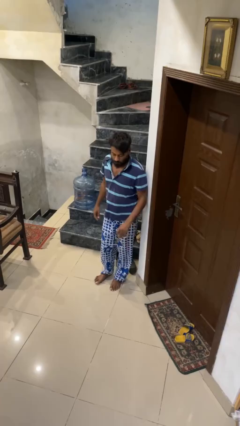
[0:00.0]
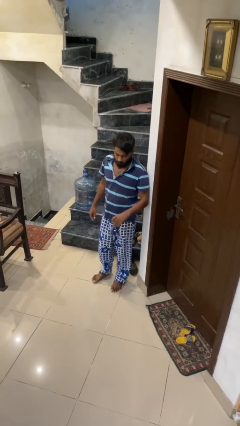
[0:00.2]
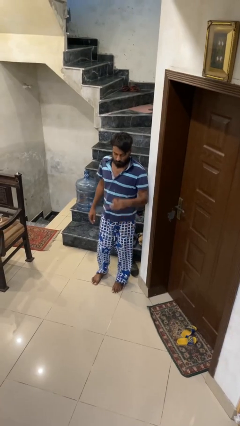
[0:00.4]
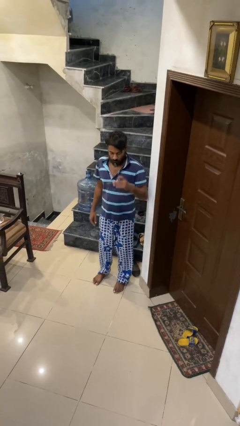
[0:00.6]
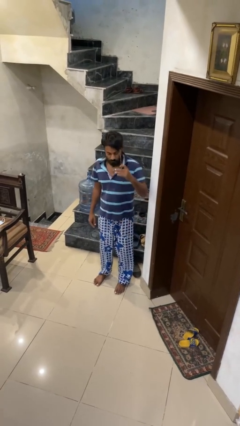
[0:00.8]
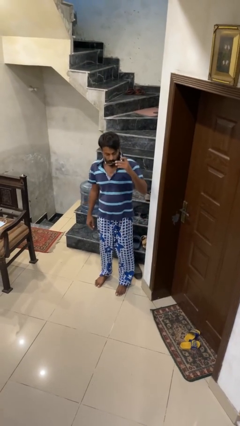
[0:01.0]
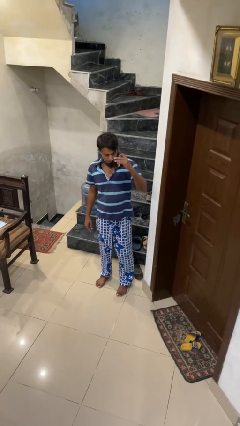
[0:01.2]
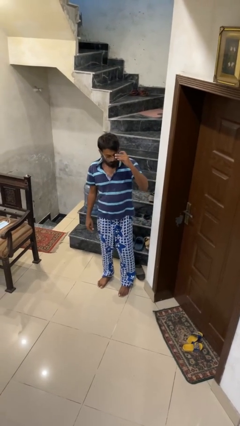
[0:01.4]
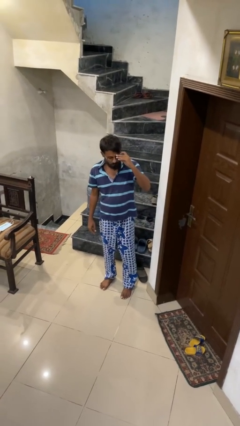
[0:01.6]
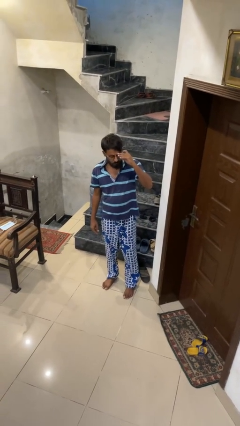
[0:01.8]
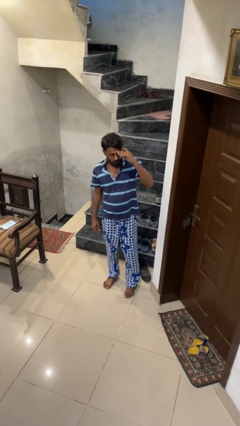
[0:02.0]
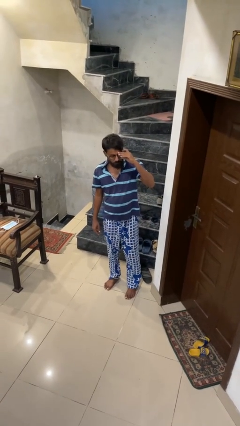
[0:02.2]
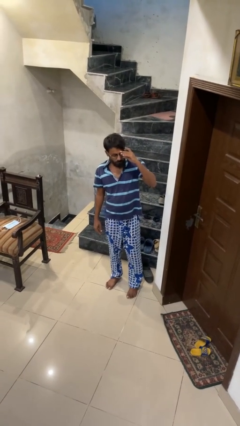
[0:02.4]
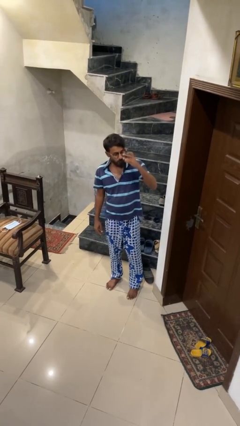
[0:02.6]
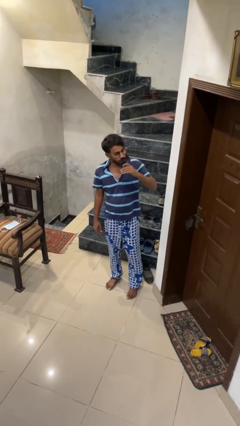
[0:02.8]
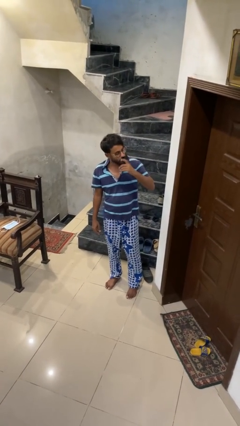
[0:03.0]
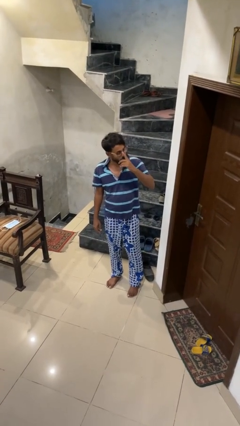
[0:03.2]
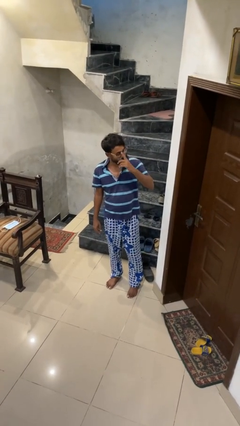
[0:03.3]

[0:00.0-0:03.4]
person puts on glasses

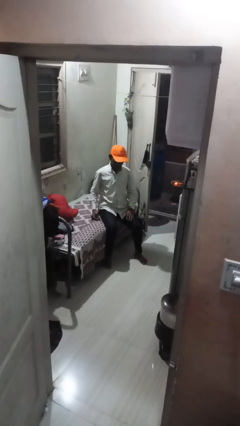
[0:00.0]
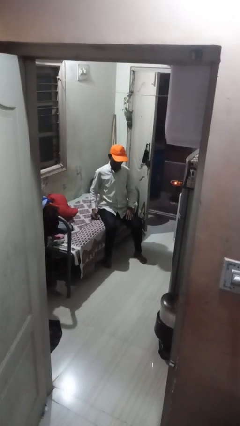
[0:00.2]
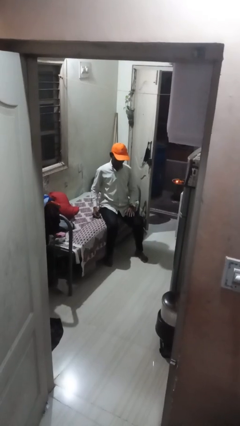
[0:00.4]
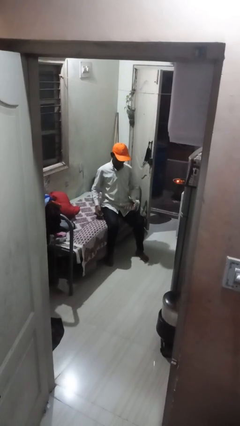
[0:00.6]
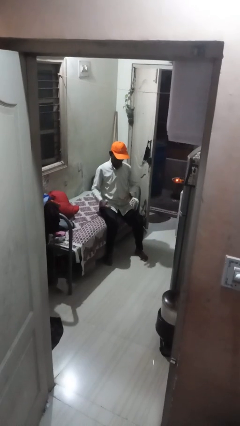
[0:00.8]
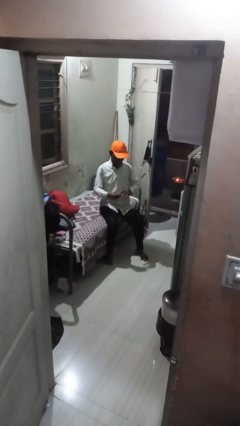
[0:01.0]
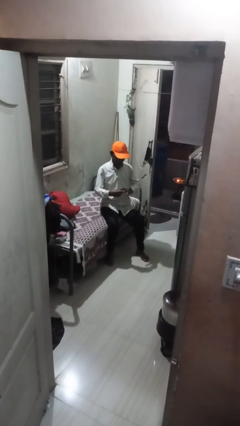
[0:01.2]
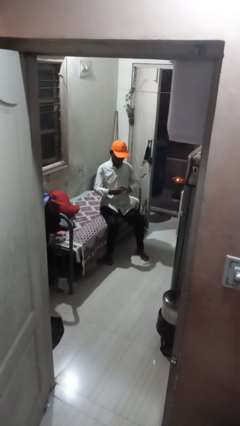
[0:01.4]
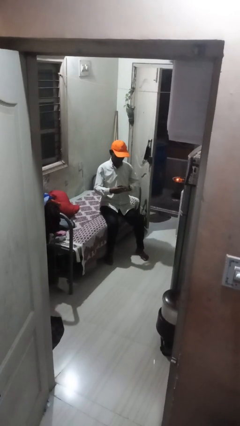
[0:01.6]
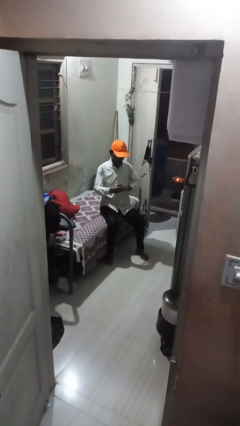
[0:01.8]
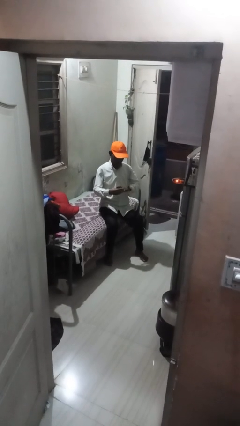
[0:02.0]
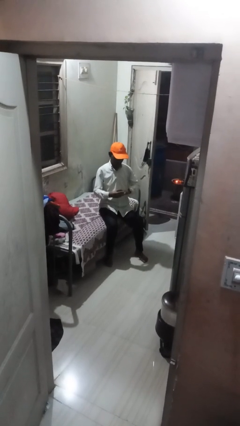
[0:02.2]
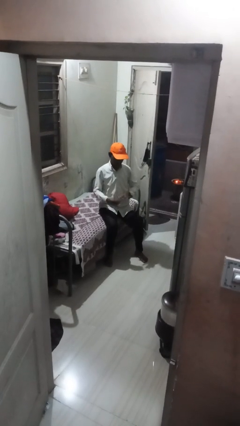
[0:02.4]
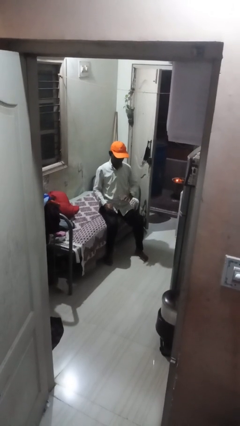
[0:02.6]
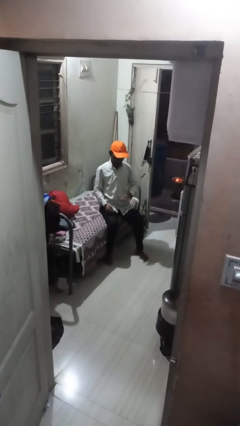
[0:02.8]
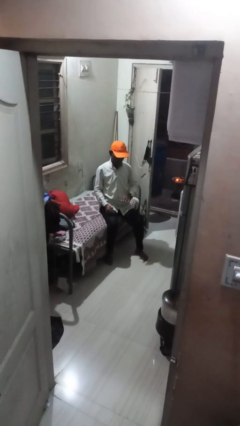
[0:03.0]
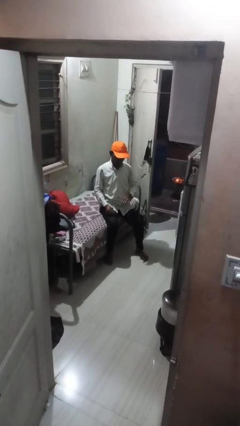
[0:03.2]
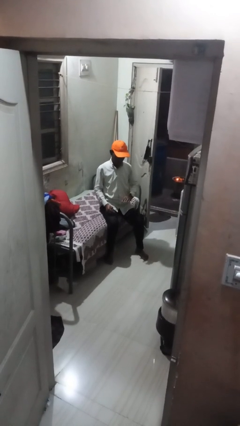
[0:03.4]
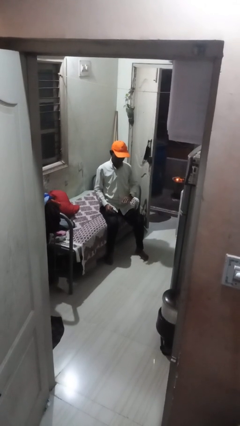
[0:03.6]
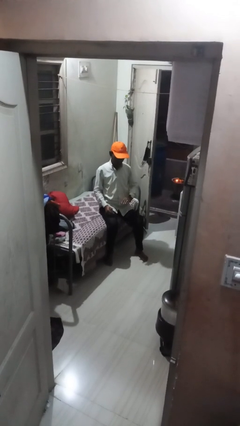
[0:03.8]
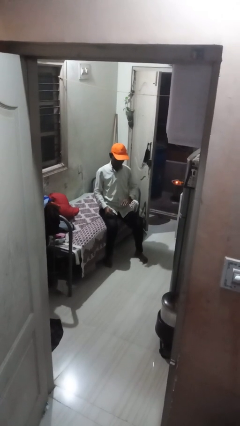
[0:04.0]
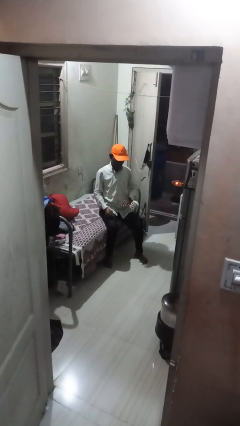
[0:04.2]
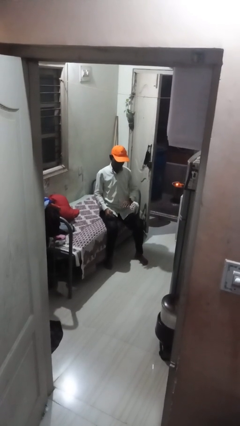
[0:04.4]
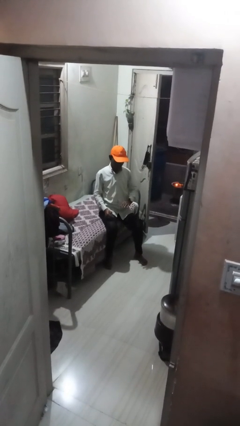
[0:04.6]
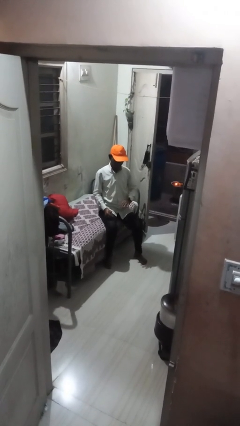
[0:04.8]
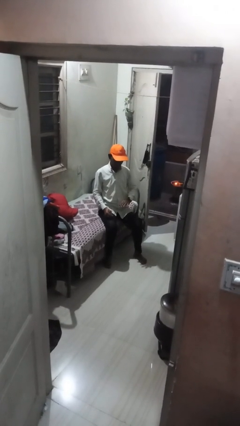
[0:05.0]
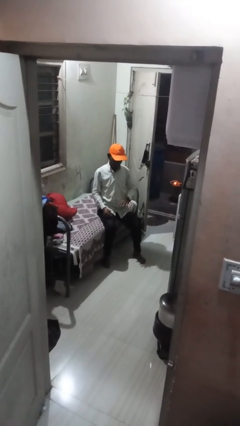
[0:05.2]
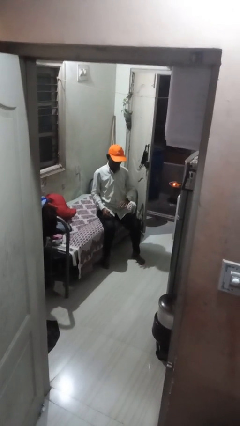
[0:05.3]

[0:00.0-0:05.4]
person puts on ring

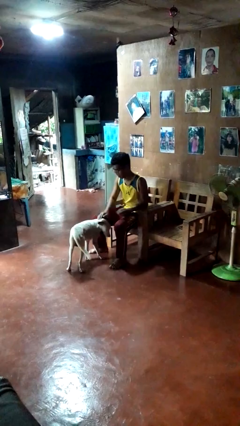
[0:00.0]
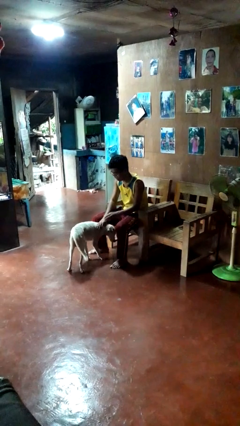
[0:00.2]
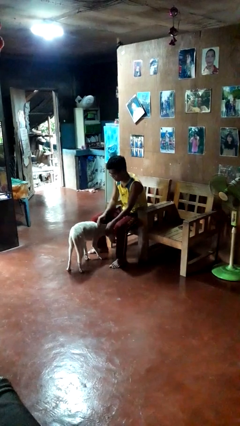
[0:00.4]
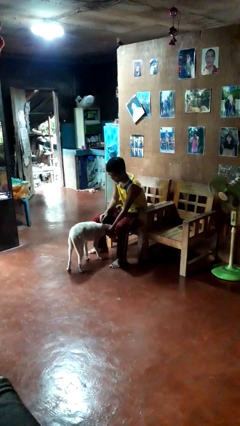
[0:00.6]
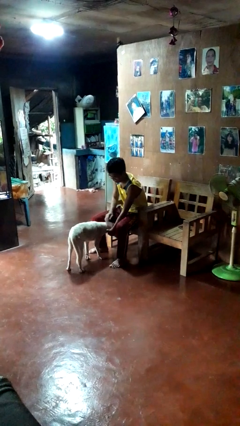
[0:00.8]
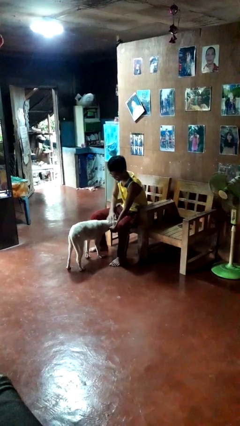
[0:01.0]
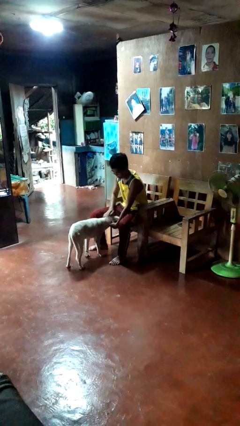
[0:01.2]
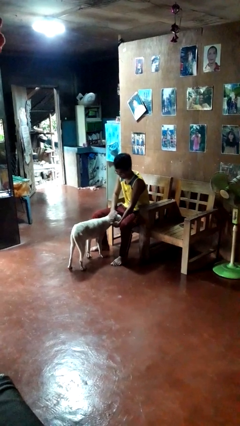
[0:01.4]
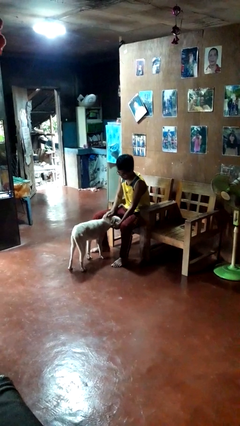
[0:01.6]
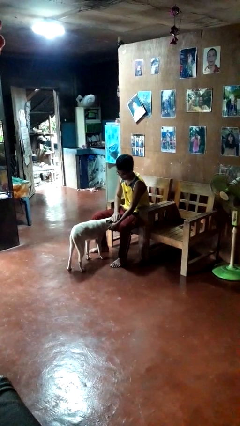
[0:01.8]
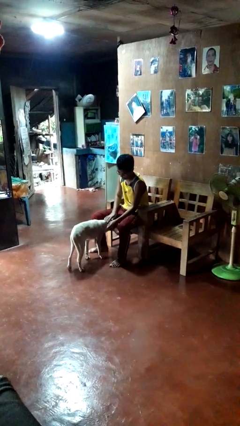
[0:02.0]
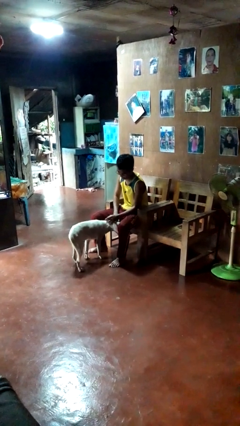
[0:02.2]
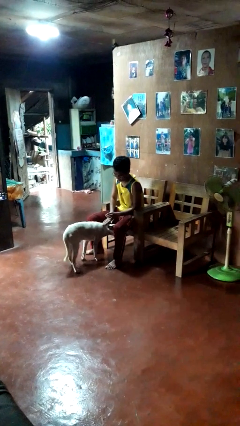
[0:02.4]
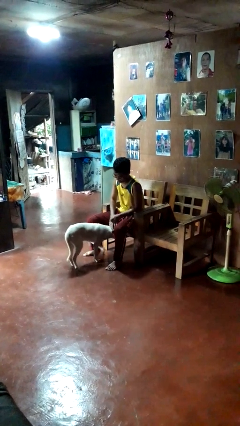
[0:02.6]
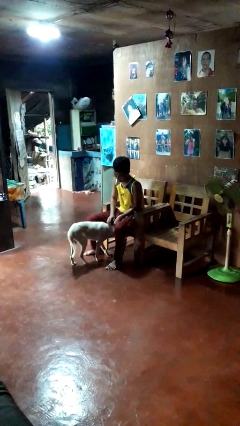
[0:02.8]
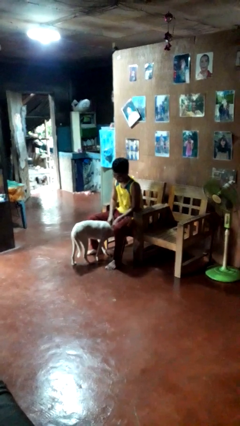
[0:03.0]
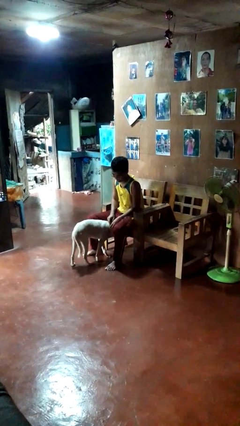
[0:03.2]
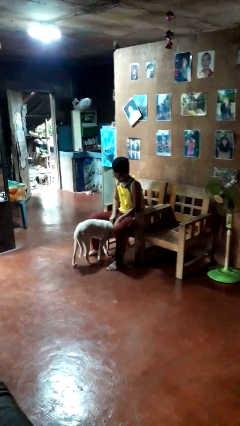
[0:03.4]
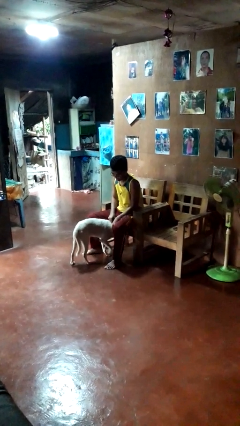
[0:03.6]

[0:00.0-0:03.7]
person pets dog

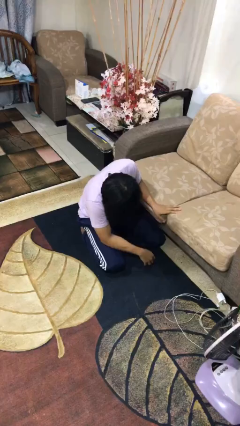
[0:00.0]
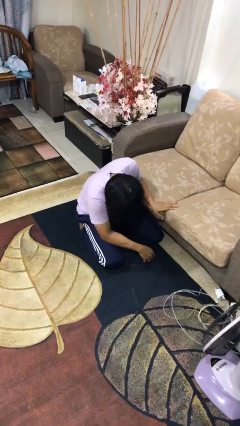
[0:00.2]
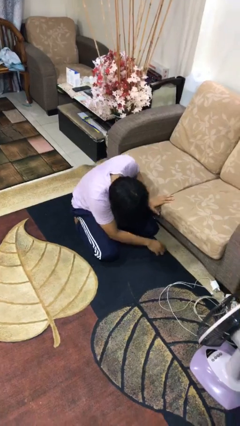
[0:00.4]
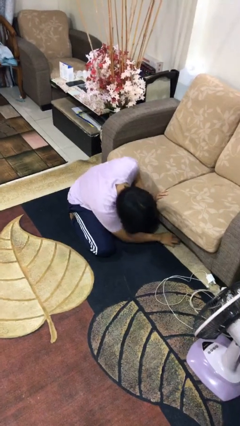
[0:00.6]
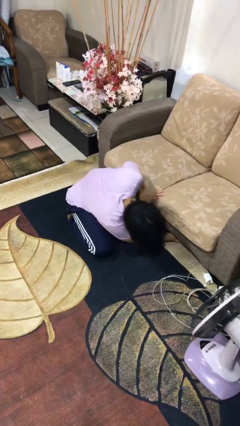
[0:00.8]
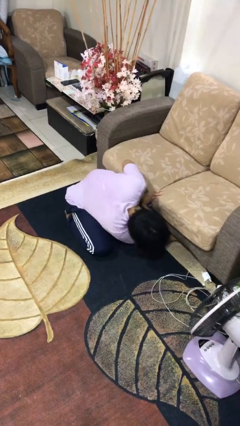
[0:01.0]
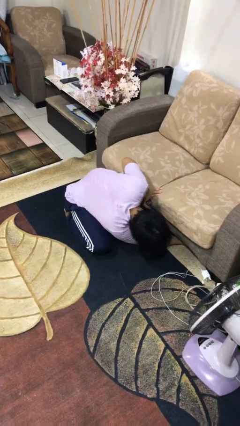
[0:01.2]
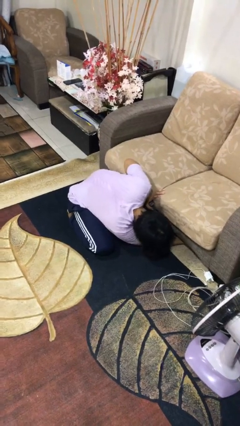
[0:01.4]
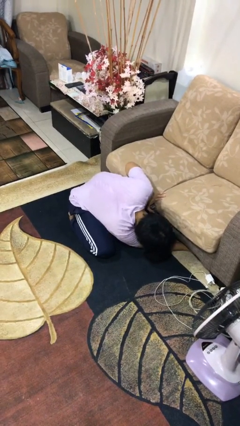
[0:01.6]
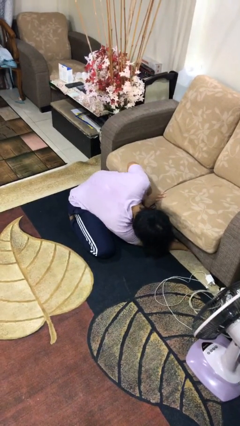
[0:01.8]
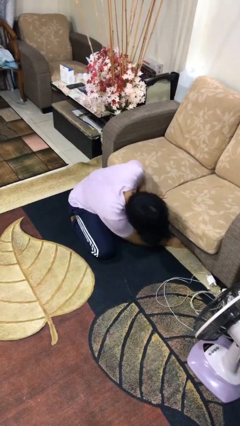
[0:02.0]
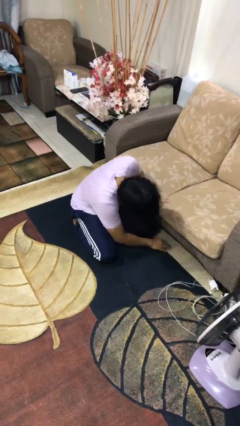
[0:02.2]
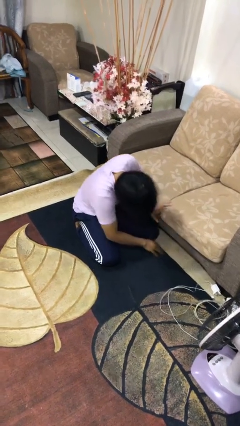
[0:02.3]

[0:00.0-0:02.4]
person searches under couch

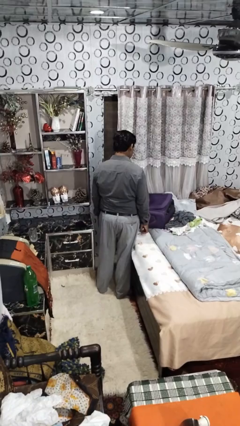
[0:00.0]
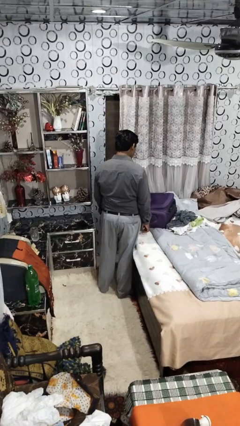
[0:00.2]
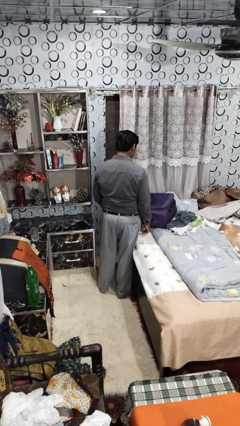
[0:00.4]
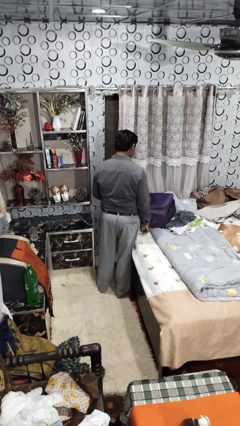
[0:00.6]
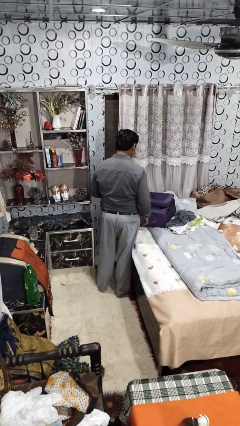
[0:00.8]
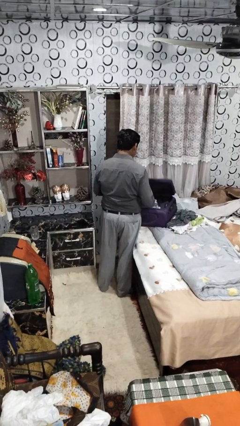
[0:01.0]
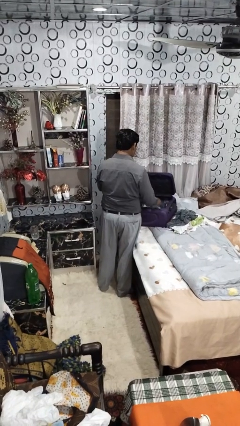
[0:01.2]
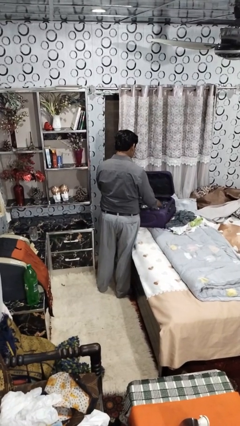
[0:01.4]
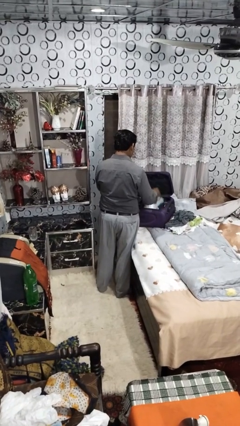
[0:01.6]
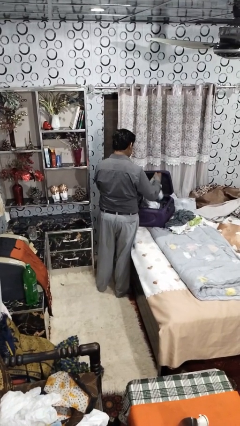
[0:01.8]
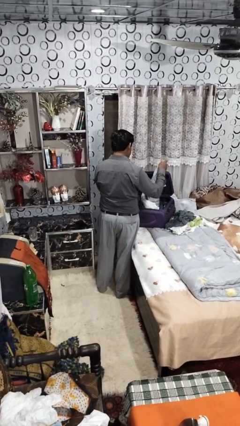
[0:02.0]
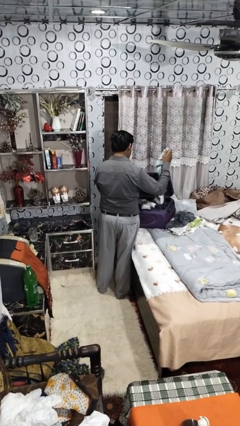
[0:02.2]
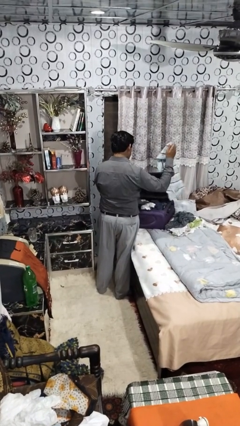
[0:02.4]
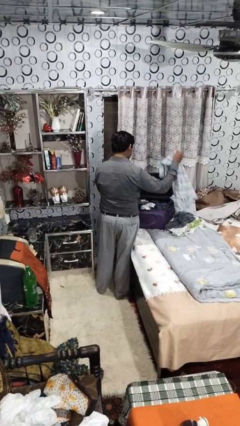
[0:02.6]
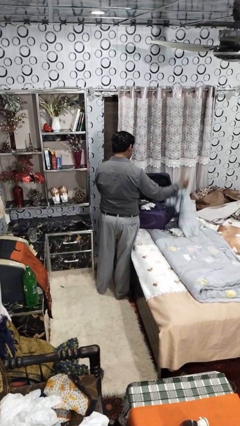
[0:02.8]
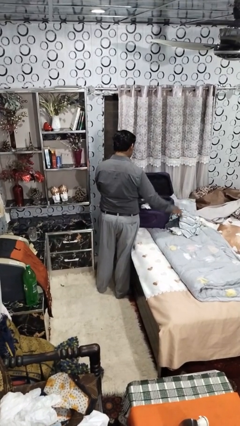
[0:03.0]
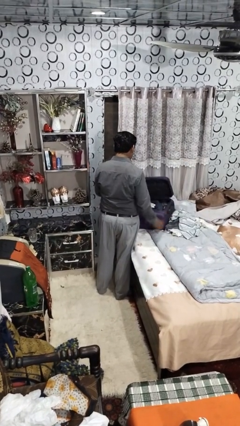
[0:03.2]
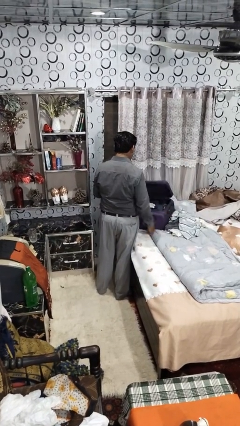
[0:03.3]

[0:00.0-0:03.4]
person unloads clothes from suitcase
